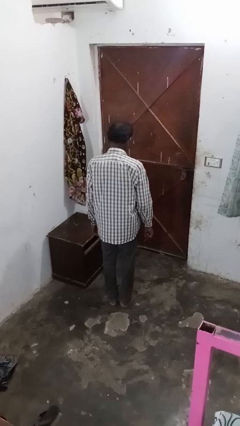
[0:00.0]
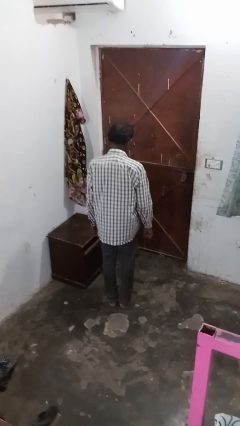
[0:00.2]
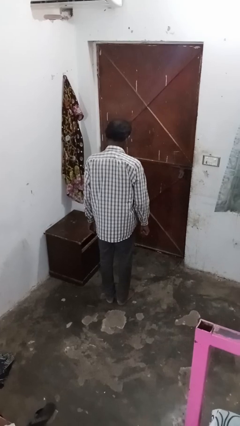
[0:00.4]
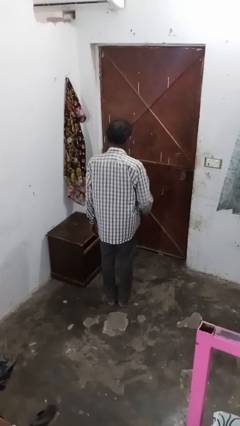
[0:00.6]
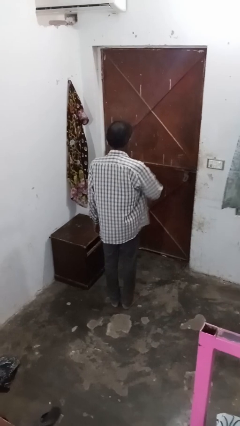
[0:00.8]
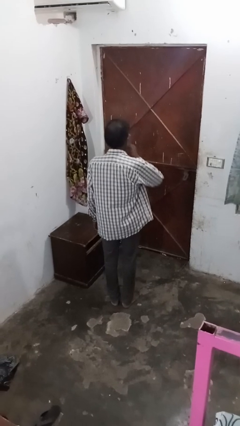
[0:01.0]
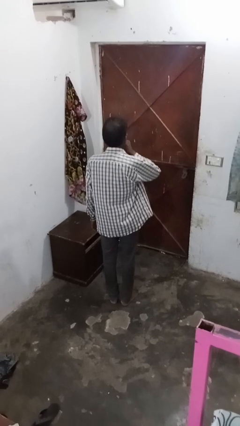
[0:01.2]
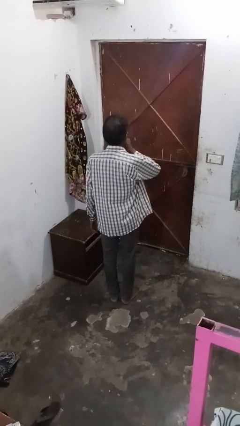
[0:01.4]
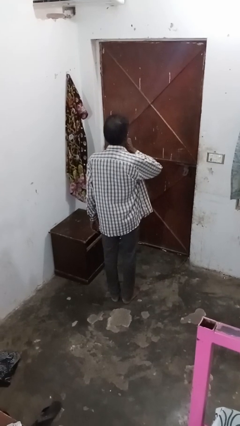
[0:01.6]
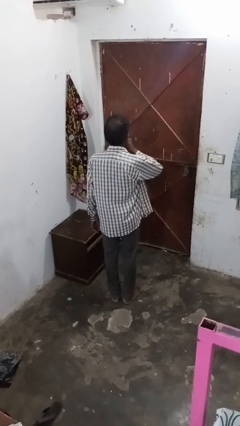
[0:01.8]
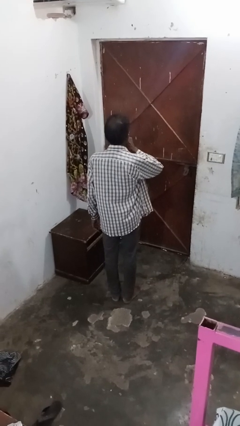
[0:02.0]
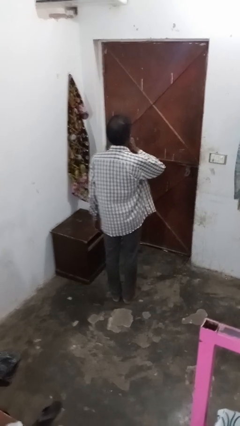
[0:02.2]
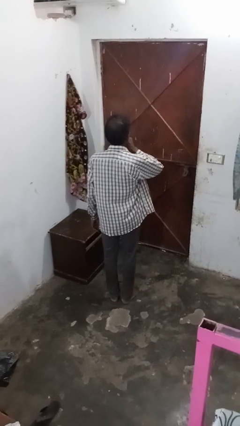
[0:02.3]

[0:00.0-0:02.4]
person gestures be quiet

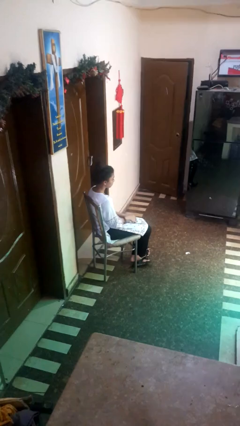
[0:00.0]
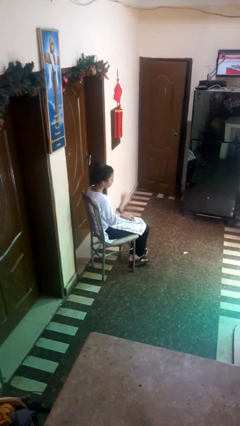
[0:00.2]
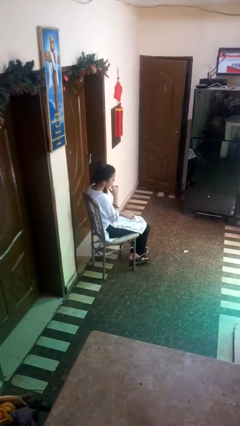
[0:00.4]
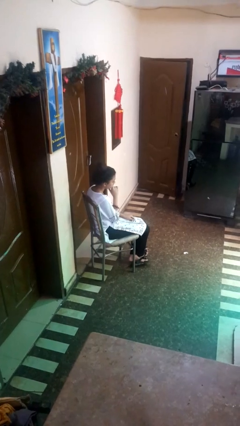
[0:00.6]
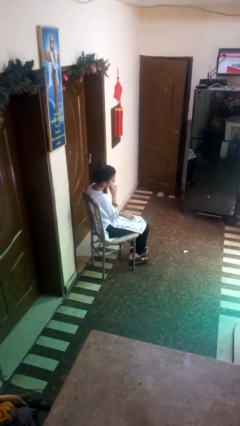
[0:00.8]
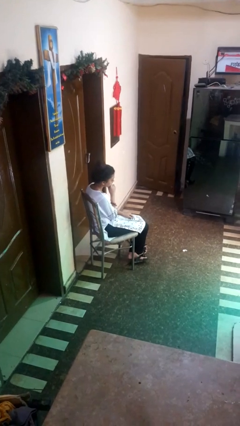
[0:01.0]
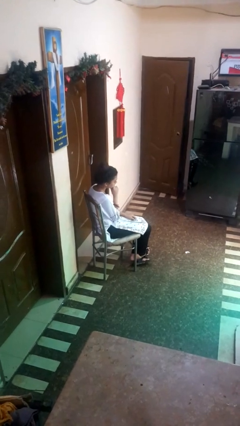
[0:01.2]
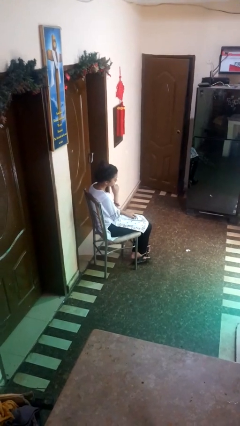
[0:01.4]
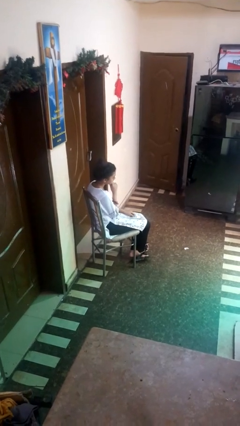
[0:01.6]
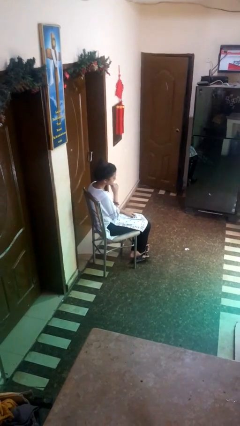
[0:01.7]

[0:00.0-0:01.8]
person strokes chin

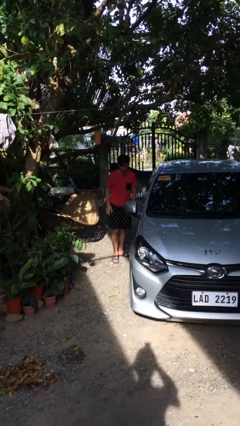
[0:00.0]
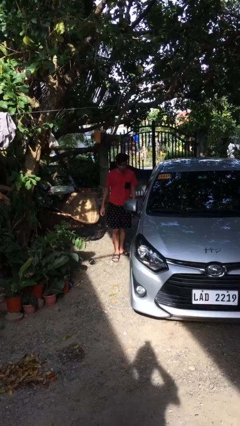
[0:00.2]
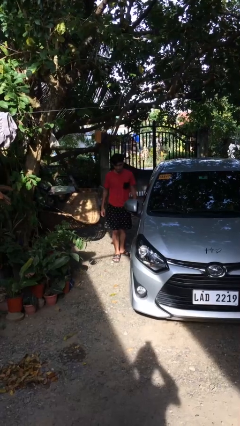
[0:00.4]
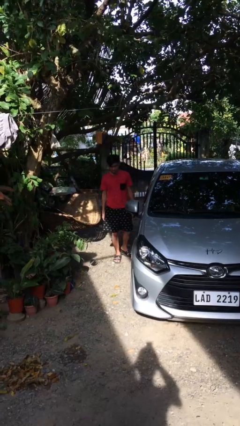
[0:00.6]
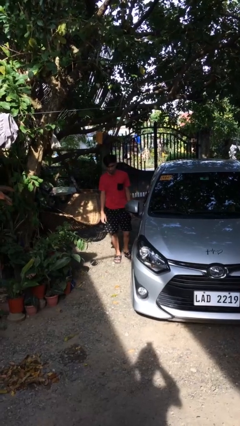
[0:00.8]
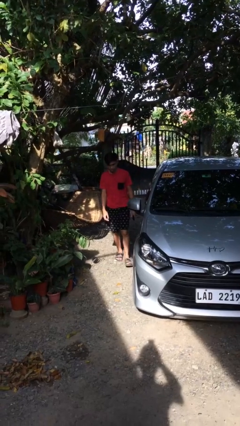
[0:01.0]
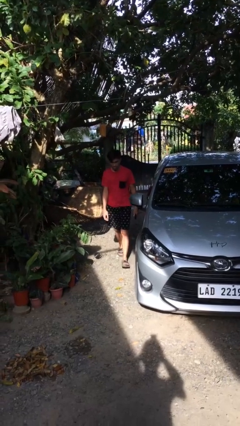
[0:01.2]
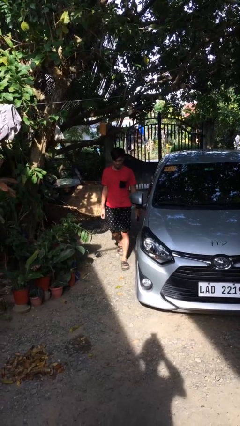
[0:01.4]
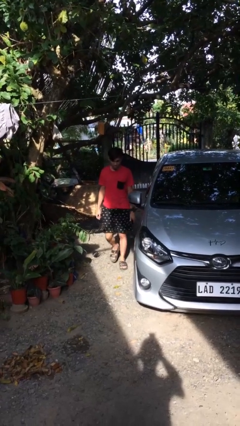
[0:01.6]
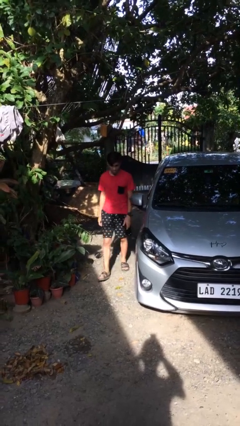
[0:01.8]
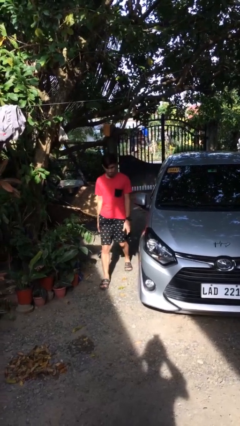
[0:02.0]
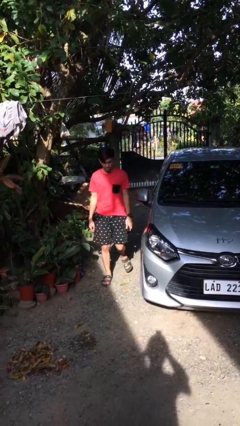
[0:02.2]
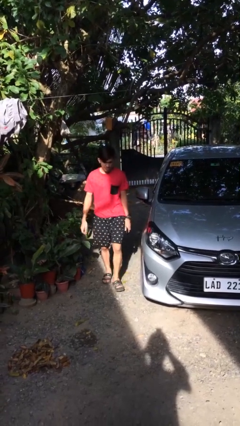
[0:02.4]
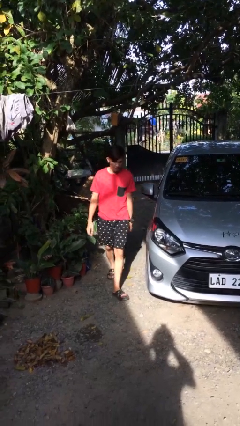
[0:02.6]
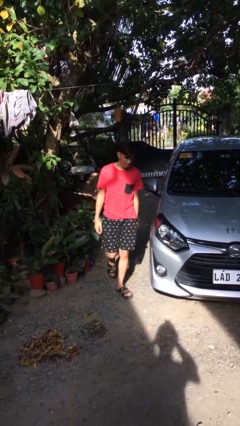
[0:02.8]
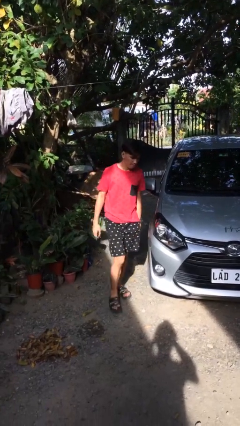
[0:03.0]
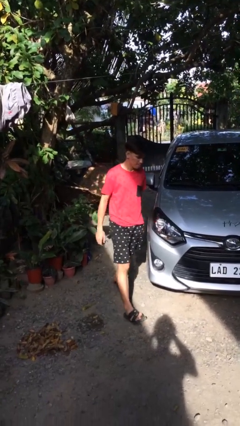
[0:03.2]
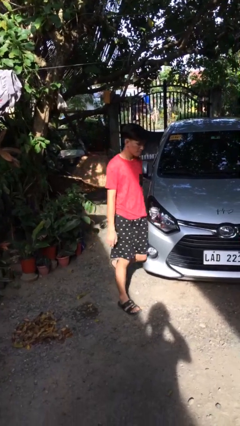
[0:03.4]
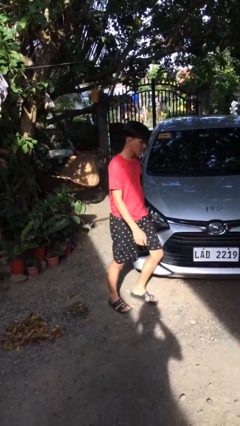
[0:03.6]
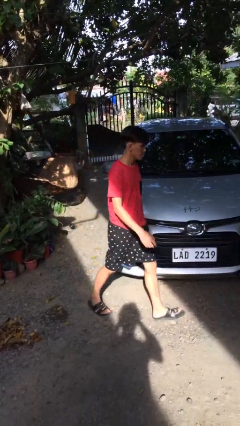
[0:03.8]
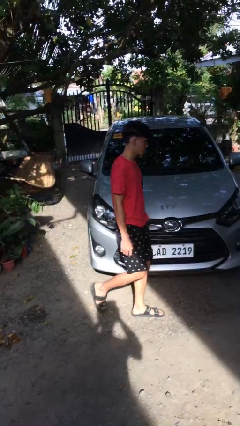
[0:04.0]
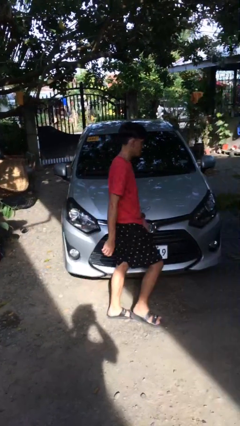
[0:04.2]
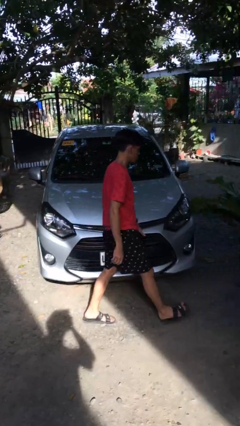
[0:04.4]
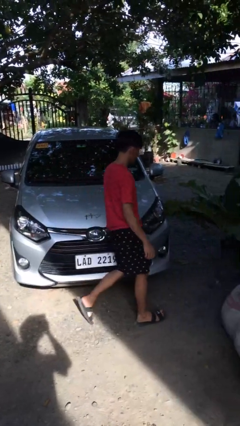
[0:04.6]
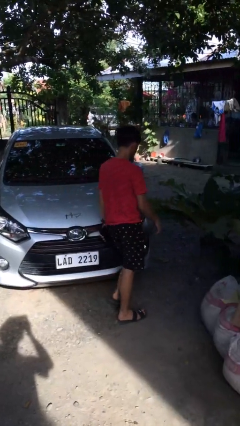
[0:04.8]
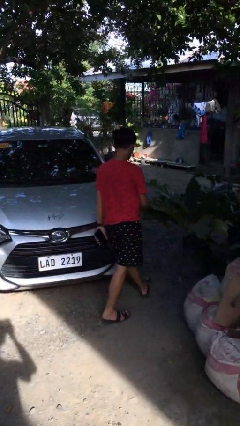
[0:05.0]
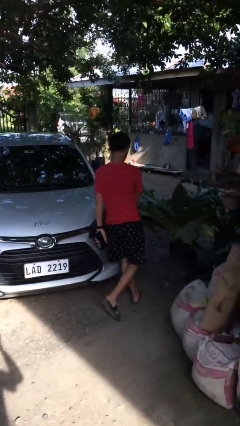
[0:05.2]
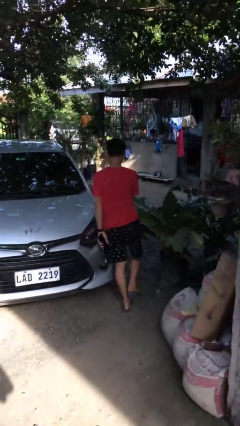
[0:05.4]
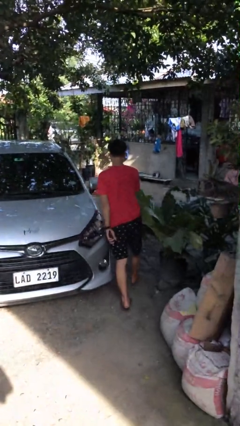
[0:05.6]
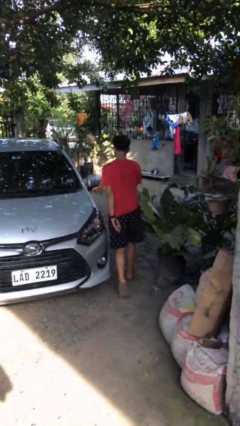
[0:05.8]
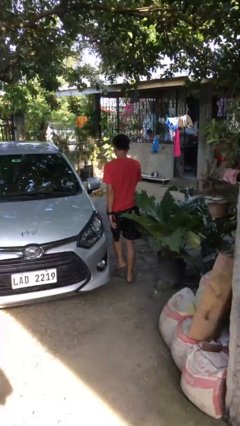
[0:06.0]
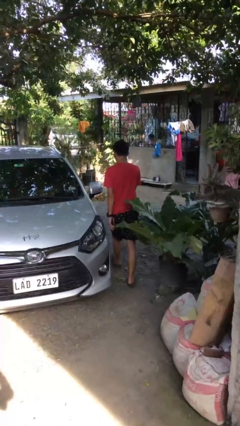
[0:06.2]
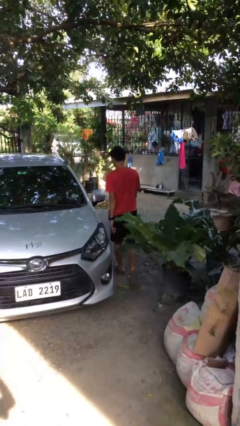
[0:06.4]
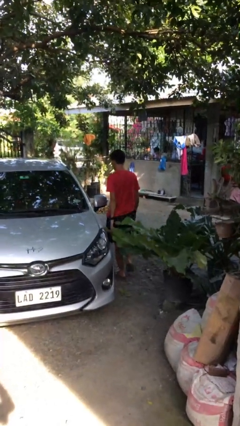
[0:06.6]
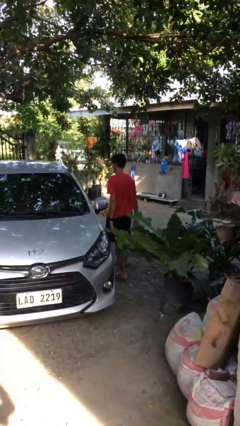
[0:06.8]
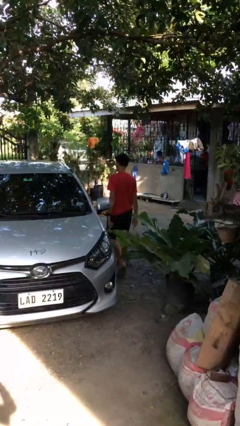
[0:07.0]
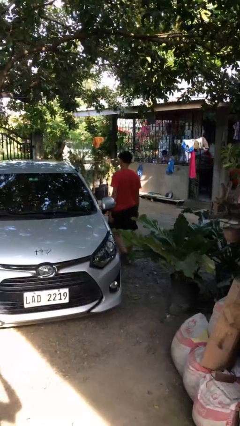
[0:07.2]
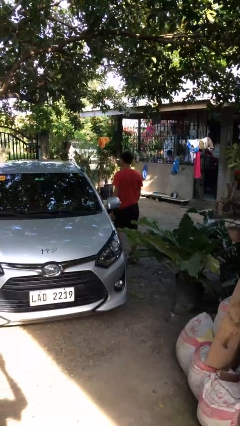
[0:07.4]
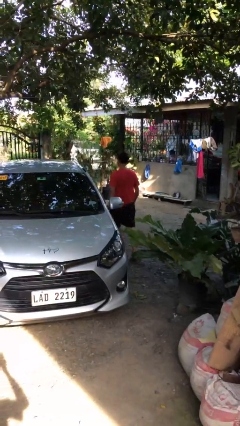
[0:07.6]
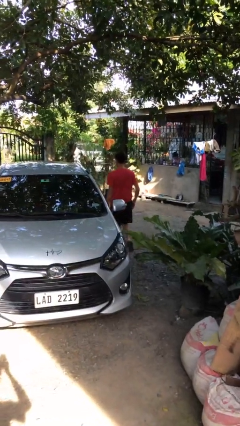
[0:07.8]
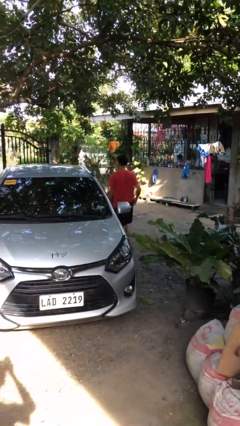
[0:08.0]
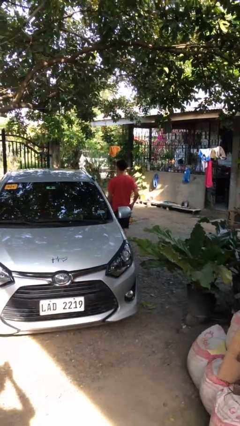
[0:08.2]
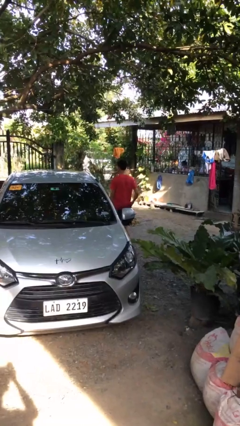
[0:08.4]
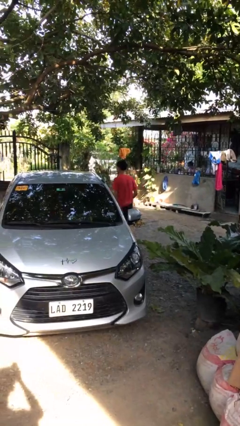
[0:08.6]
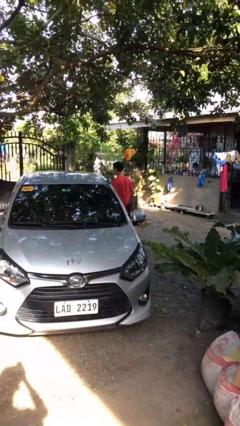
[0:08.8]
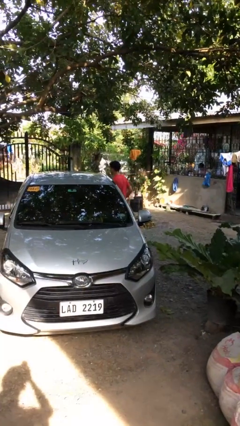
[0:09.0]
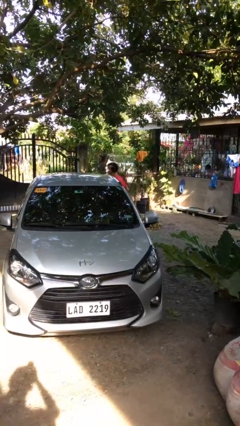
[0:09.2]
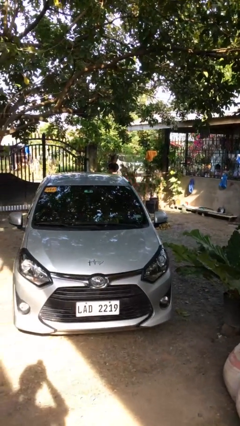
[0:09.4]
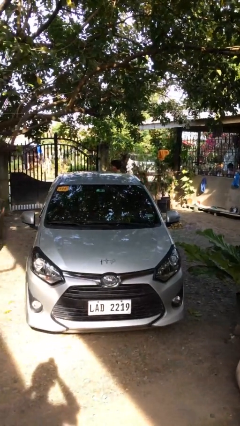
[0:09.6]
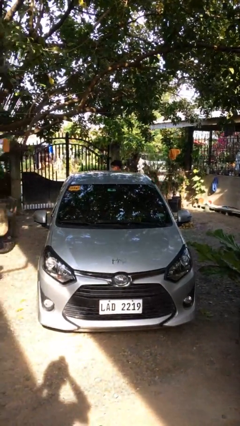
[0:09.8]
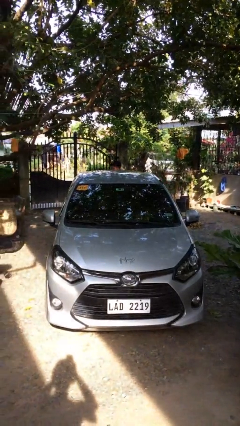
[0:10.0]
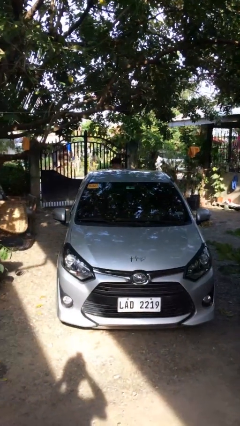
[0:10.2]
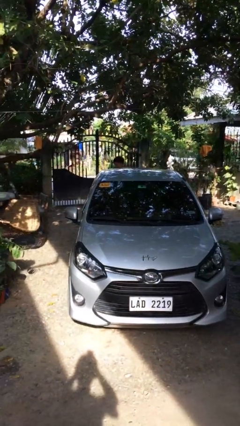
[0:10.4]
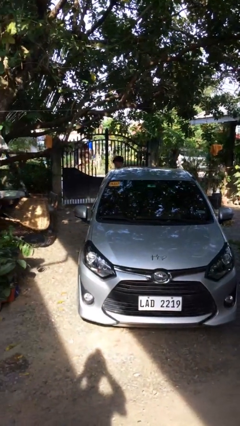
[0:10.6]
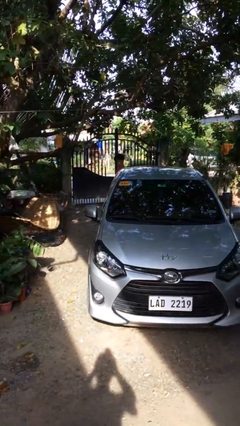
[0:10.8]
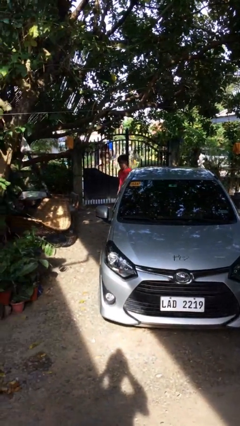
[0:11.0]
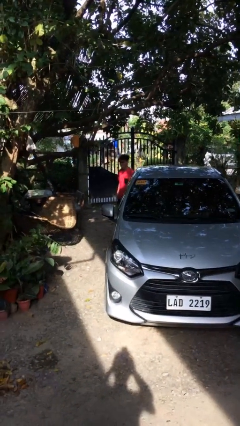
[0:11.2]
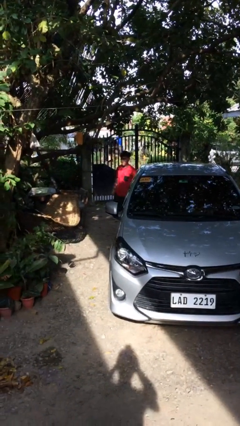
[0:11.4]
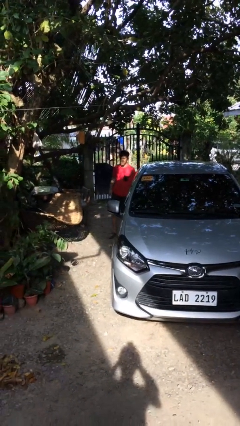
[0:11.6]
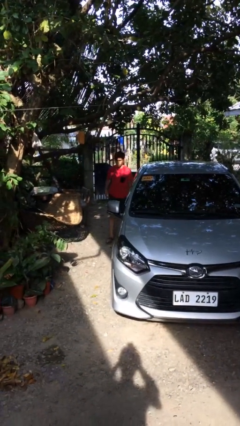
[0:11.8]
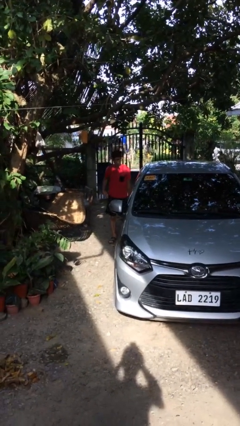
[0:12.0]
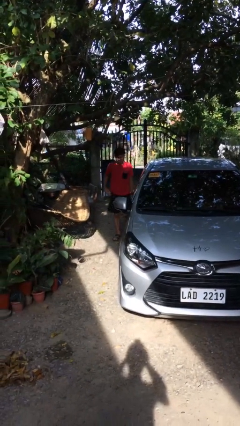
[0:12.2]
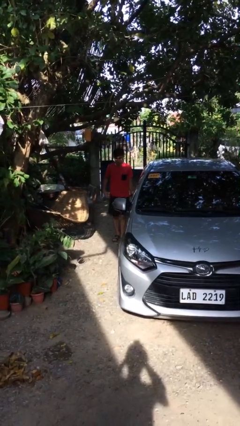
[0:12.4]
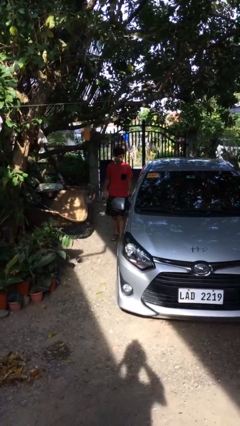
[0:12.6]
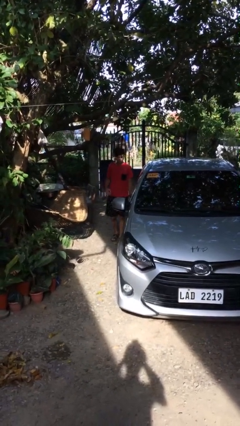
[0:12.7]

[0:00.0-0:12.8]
person walks around car

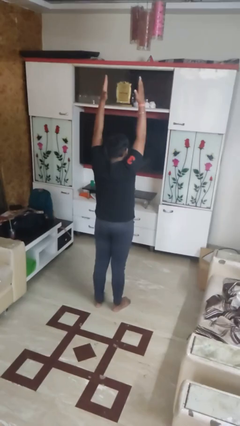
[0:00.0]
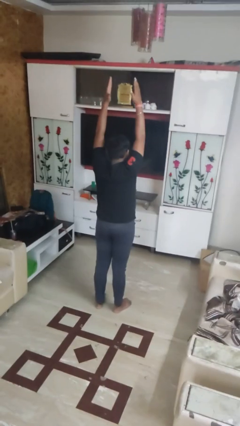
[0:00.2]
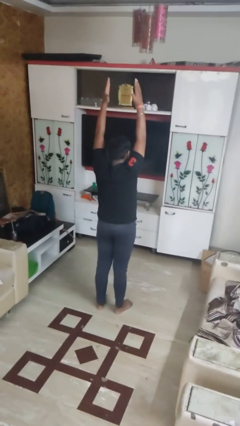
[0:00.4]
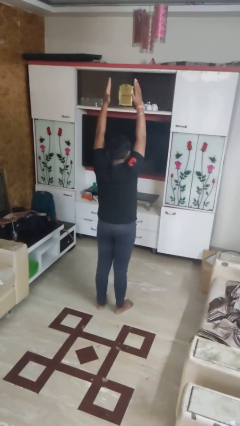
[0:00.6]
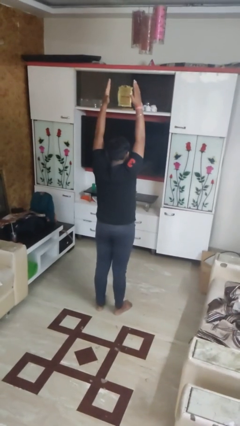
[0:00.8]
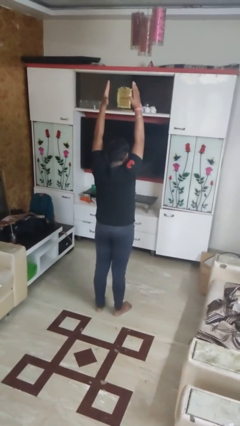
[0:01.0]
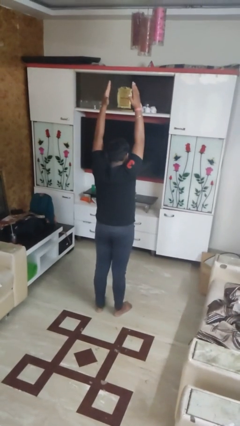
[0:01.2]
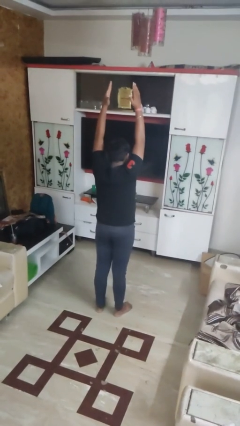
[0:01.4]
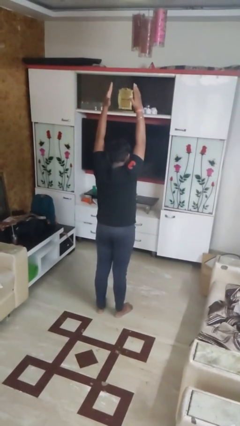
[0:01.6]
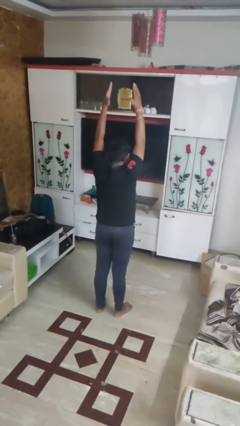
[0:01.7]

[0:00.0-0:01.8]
person stretches arms over head
